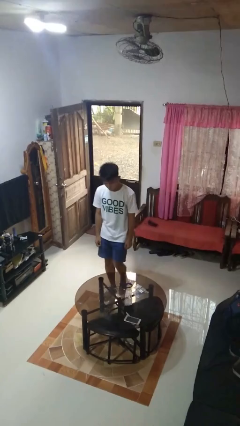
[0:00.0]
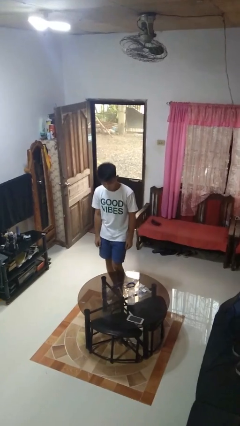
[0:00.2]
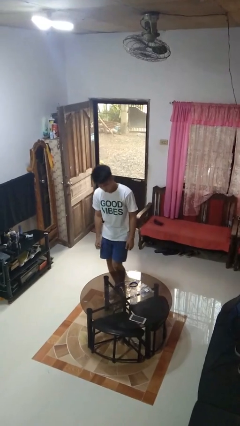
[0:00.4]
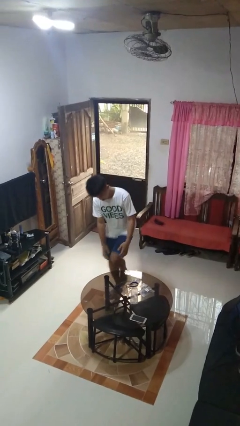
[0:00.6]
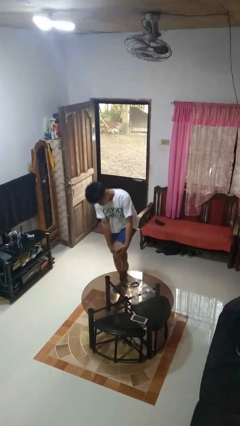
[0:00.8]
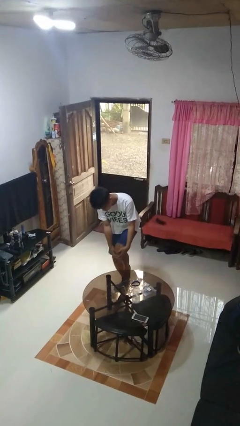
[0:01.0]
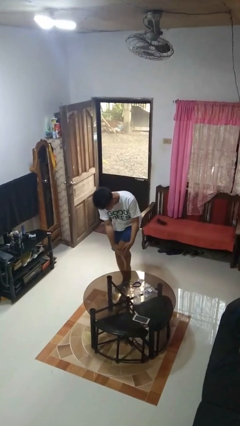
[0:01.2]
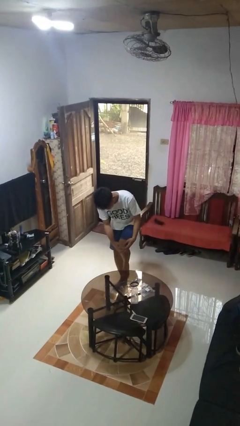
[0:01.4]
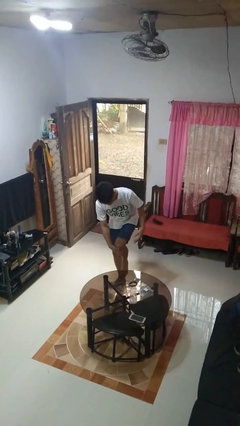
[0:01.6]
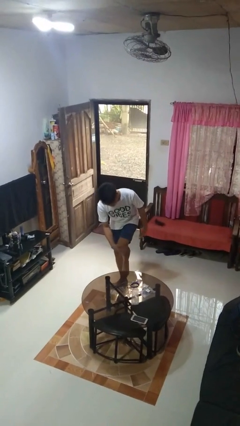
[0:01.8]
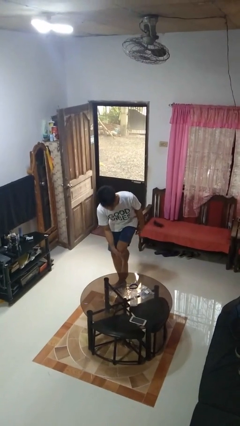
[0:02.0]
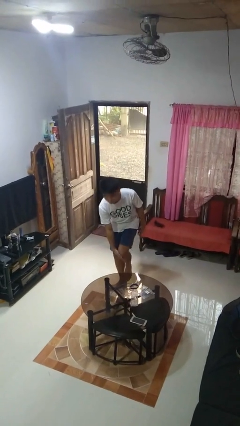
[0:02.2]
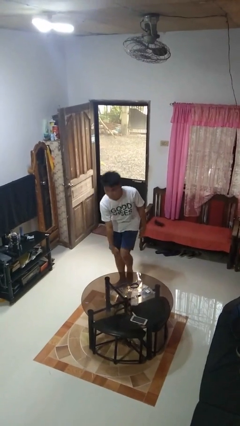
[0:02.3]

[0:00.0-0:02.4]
person bumps into table

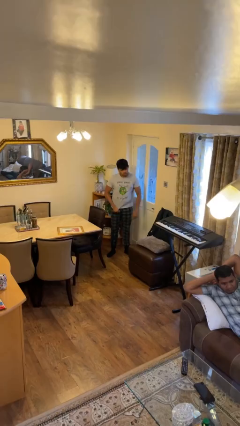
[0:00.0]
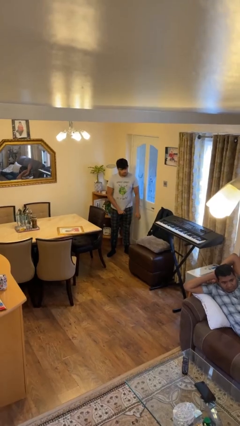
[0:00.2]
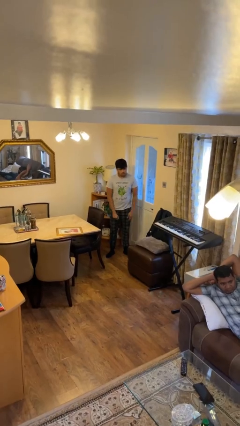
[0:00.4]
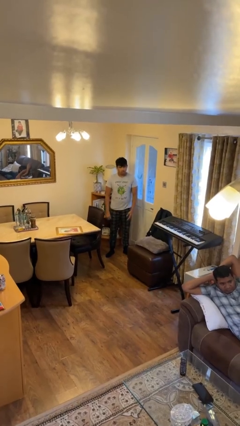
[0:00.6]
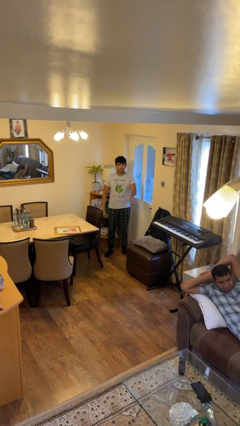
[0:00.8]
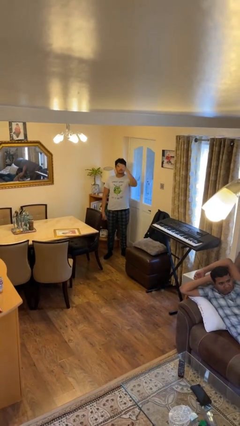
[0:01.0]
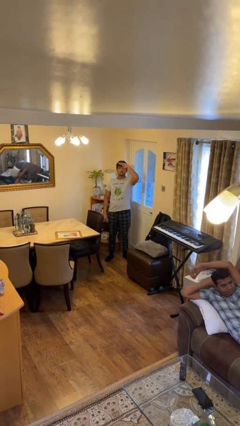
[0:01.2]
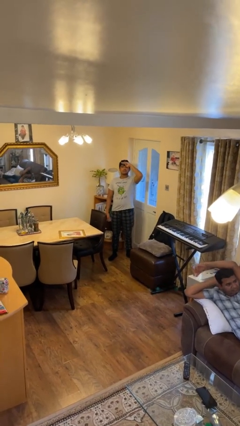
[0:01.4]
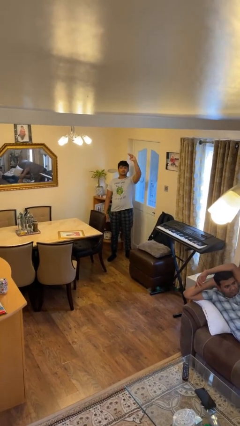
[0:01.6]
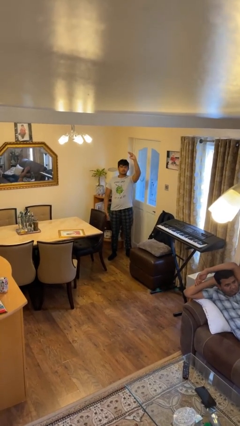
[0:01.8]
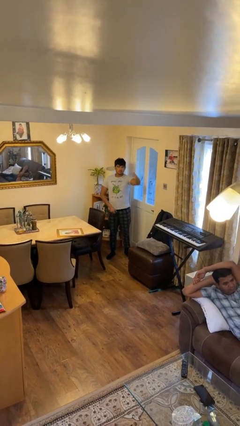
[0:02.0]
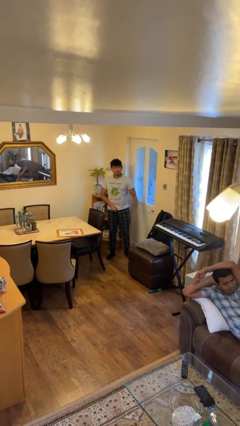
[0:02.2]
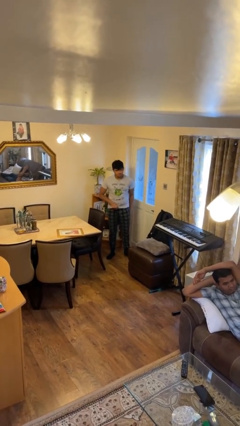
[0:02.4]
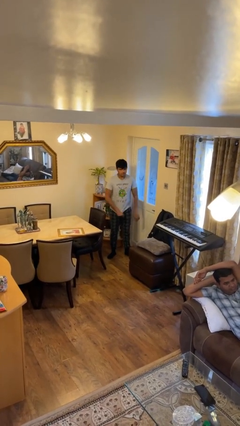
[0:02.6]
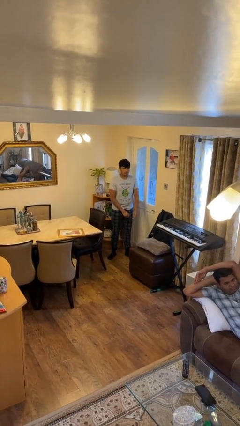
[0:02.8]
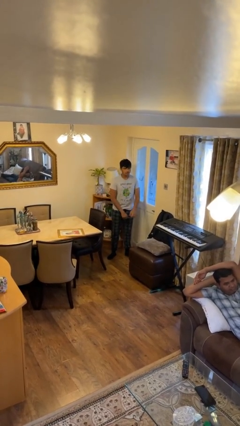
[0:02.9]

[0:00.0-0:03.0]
person salutes

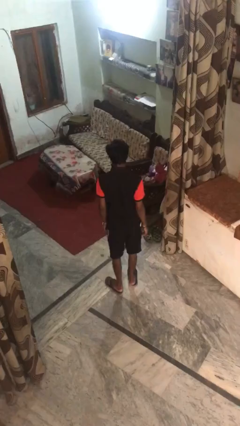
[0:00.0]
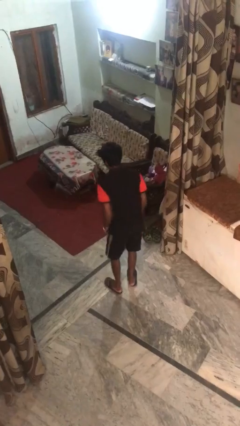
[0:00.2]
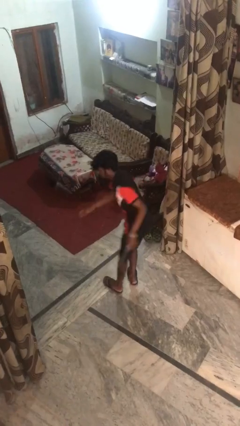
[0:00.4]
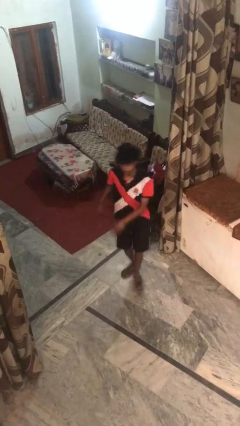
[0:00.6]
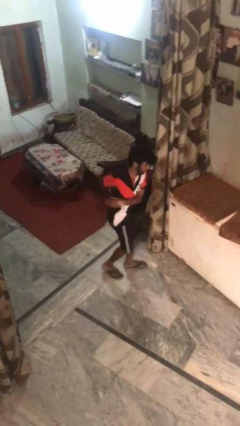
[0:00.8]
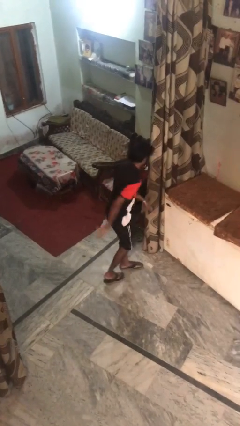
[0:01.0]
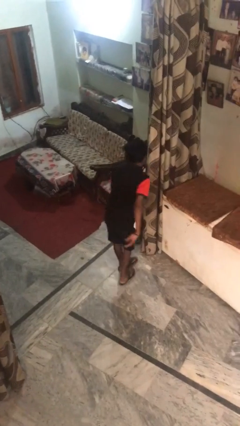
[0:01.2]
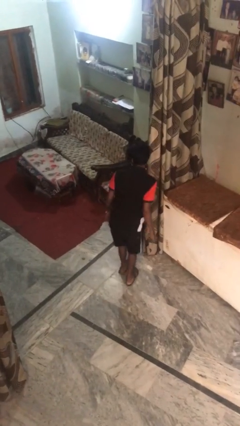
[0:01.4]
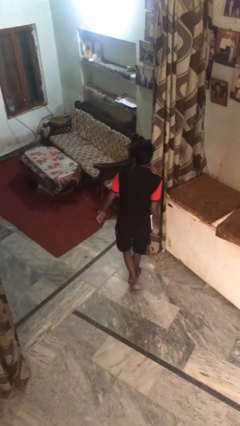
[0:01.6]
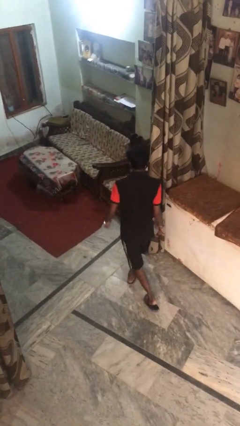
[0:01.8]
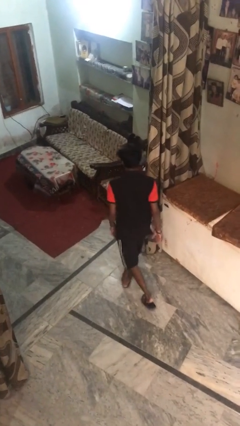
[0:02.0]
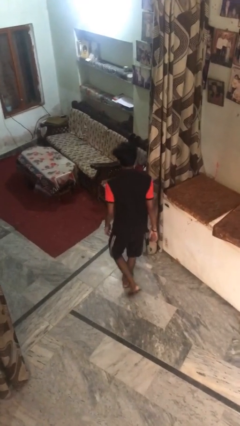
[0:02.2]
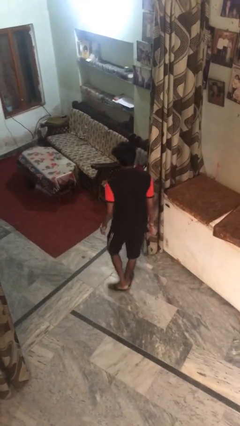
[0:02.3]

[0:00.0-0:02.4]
person twirls

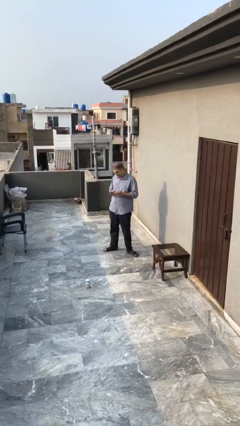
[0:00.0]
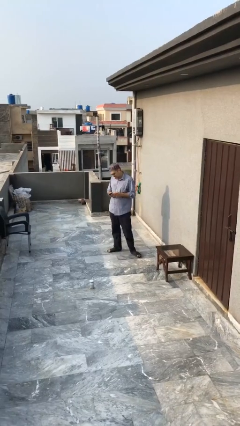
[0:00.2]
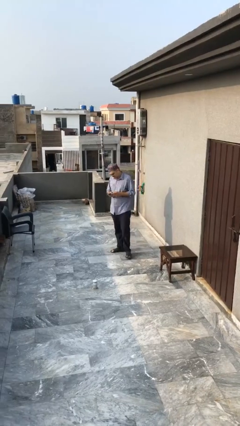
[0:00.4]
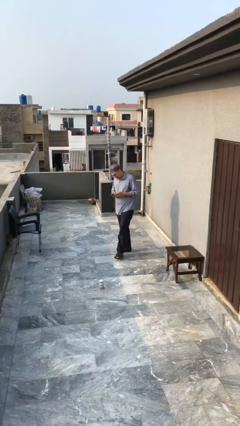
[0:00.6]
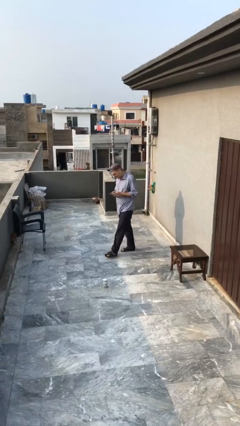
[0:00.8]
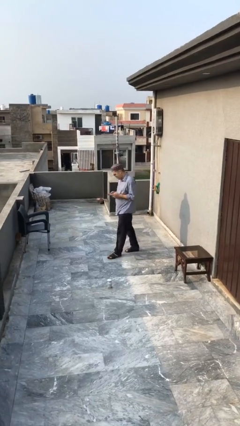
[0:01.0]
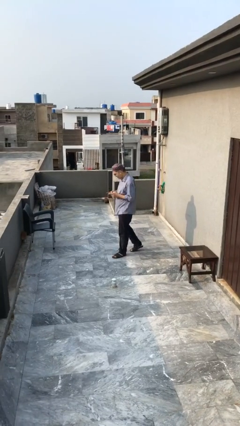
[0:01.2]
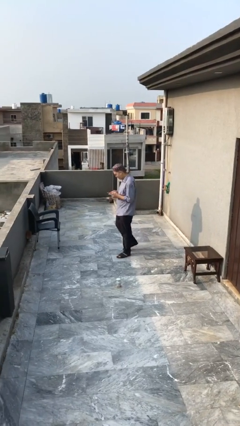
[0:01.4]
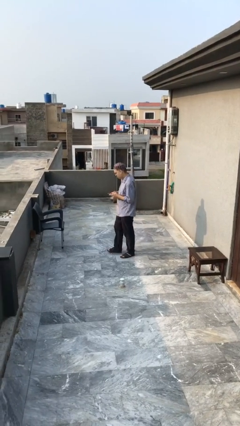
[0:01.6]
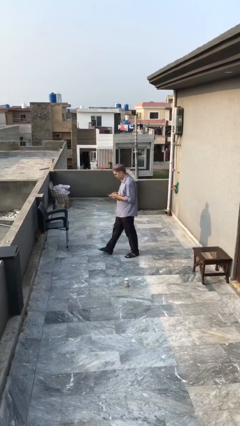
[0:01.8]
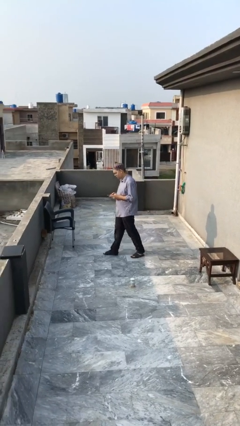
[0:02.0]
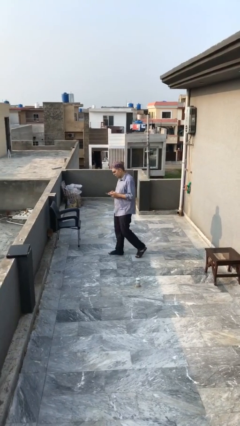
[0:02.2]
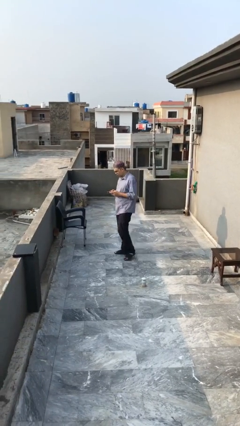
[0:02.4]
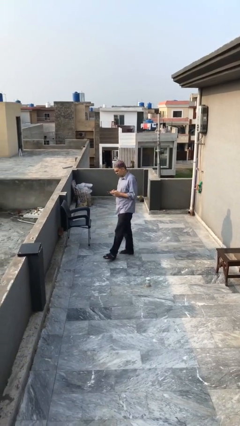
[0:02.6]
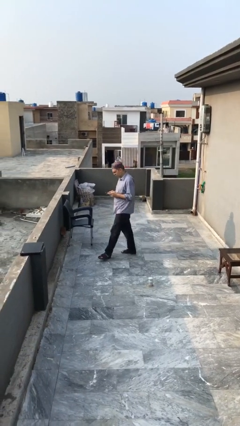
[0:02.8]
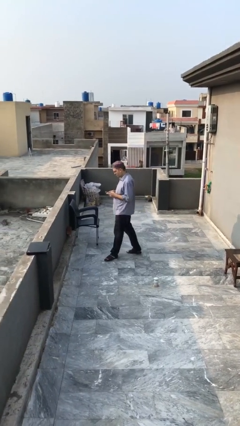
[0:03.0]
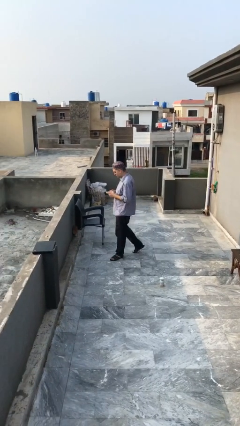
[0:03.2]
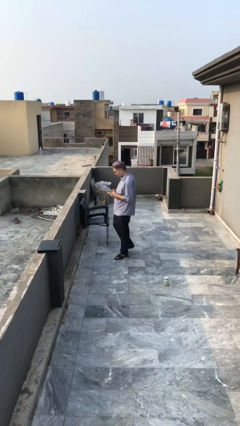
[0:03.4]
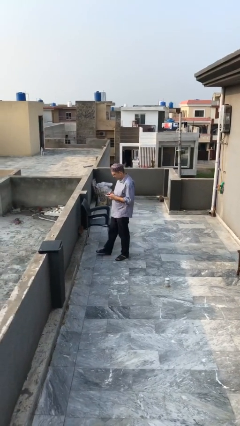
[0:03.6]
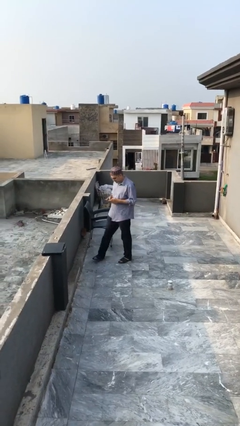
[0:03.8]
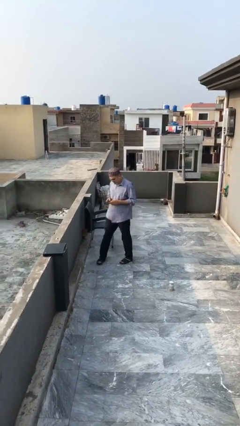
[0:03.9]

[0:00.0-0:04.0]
person texts on phone

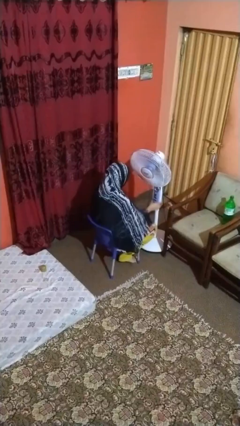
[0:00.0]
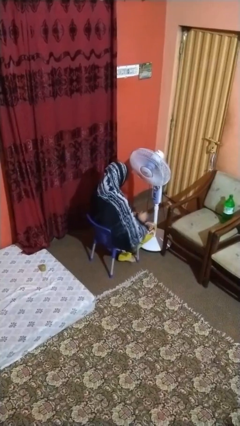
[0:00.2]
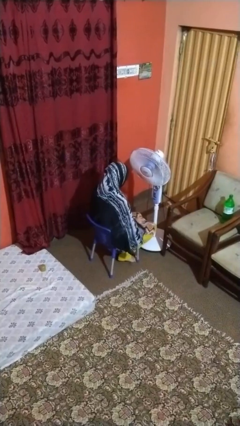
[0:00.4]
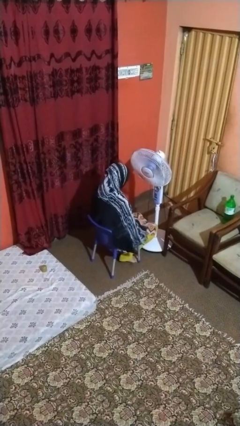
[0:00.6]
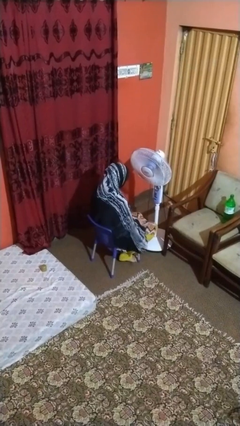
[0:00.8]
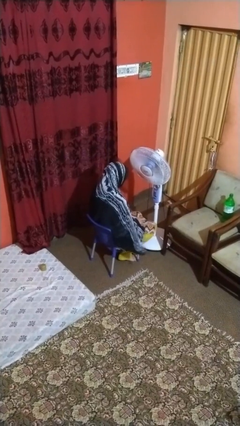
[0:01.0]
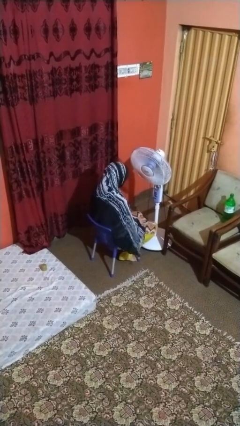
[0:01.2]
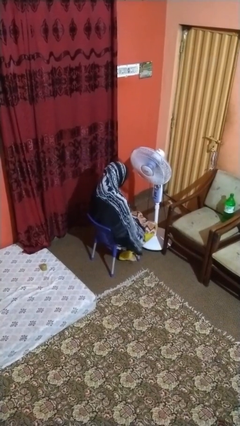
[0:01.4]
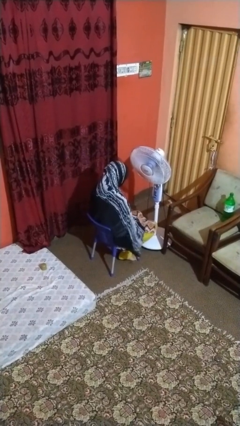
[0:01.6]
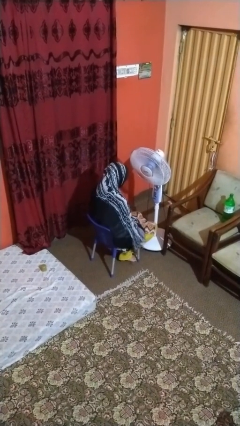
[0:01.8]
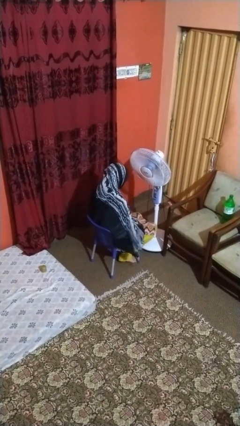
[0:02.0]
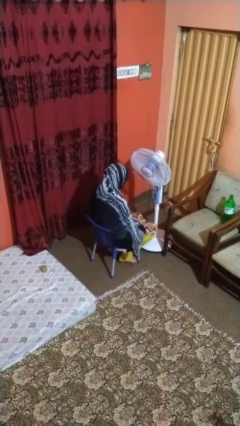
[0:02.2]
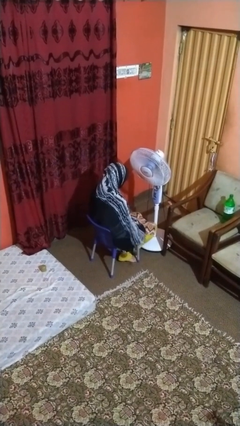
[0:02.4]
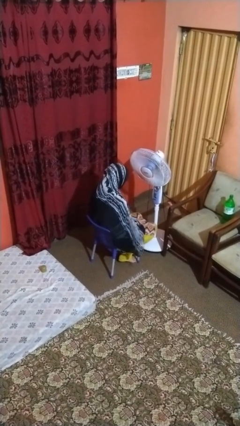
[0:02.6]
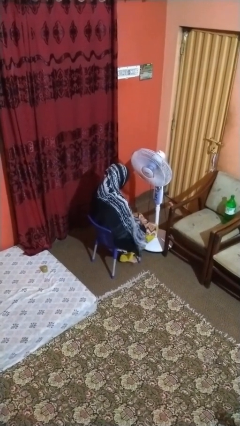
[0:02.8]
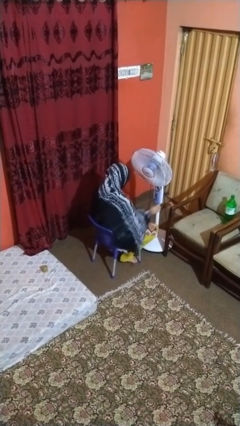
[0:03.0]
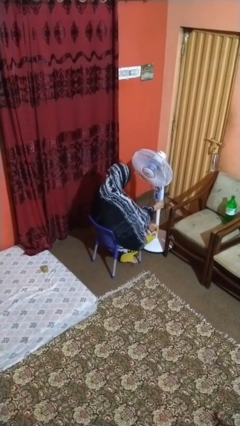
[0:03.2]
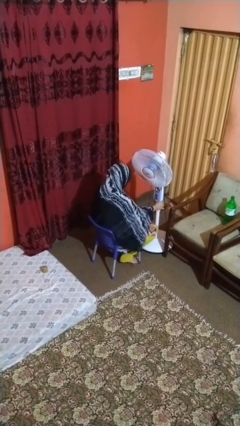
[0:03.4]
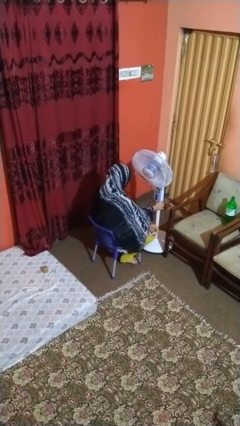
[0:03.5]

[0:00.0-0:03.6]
person turns on fan

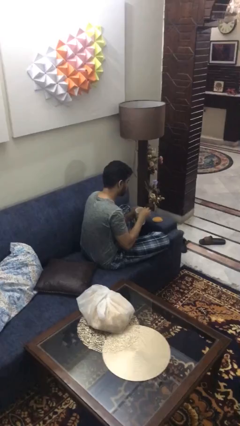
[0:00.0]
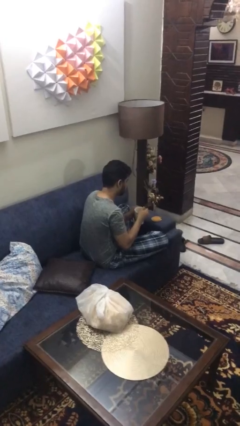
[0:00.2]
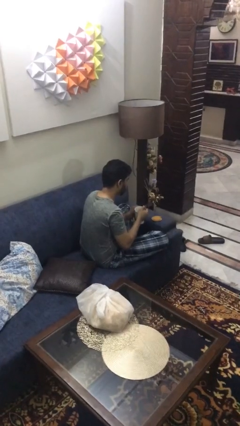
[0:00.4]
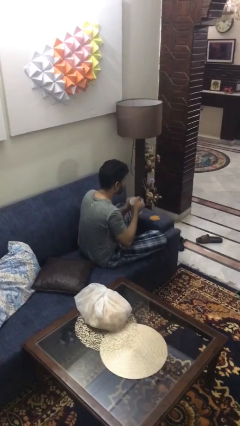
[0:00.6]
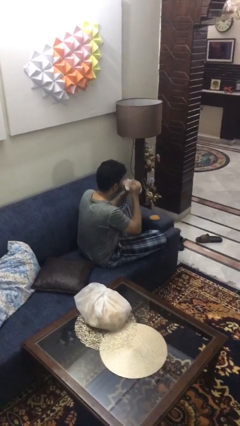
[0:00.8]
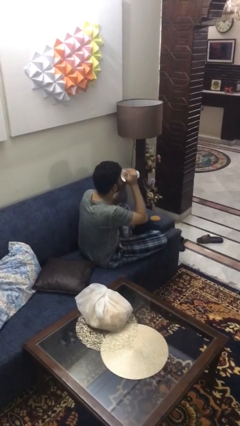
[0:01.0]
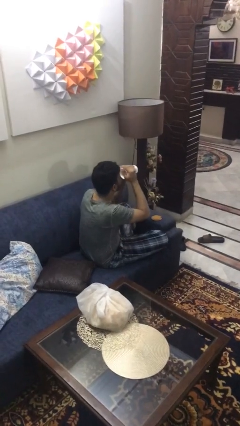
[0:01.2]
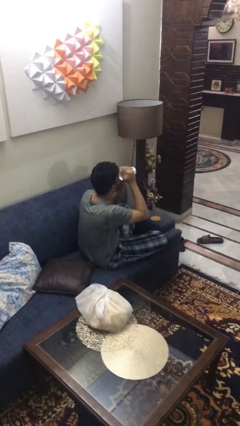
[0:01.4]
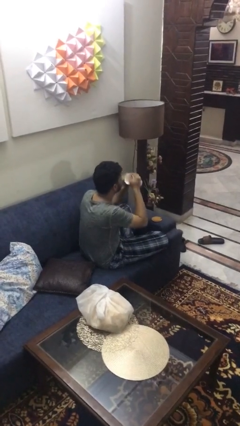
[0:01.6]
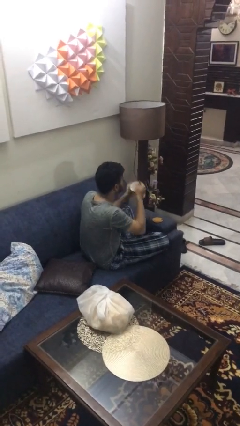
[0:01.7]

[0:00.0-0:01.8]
person drinks from mug
